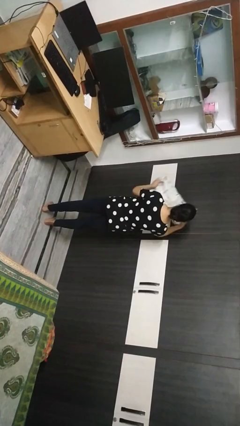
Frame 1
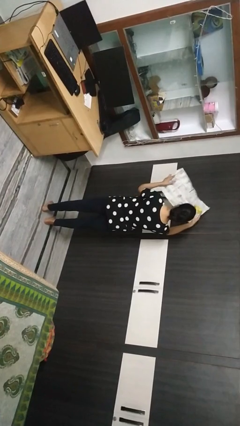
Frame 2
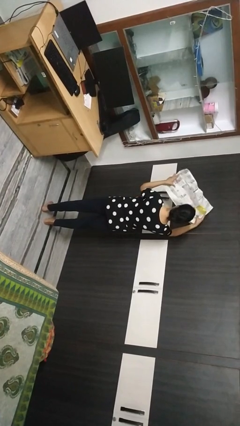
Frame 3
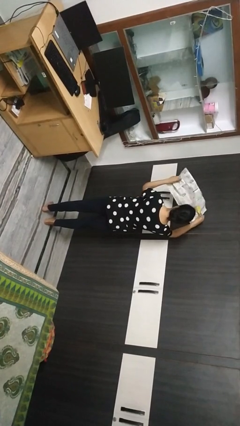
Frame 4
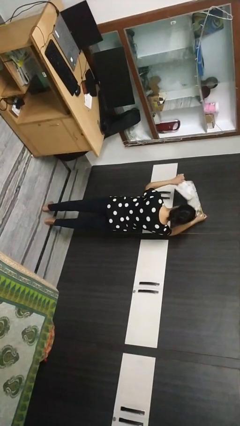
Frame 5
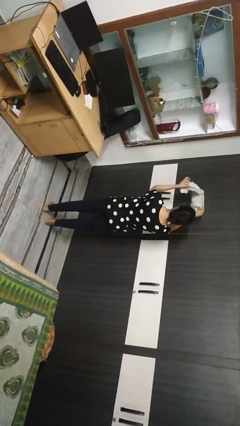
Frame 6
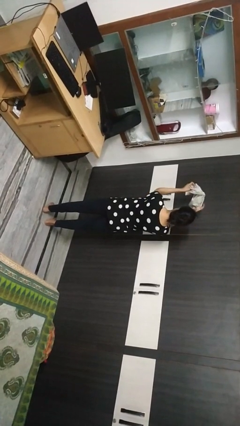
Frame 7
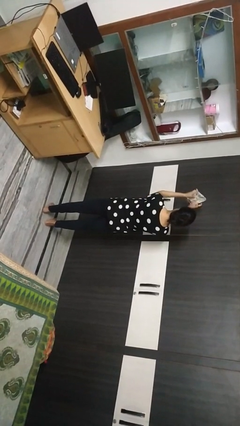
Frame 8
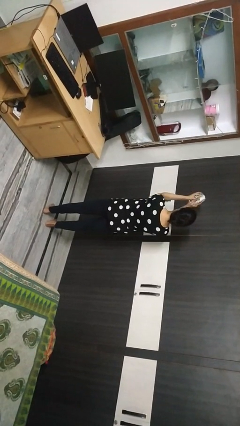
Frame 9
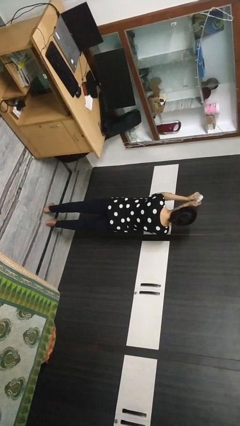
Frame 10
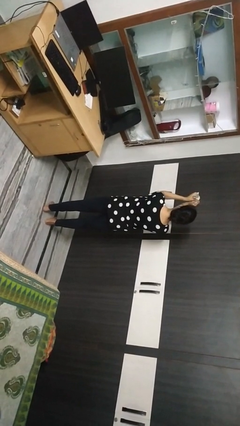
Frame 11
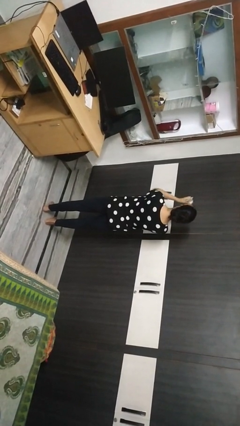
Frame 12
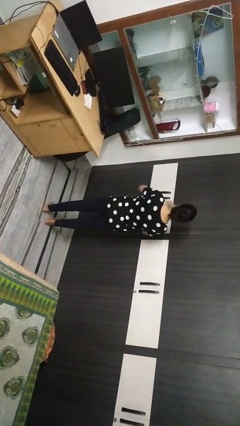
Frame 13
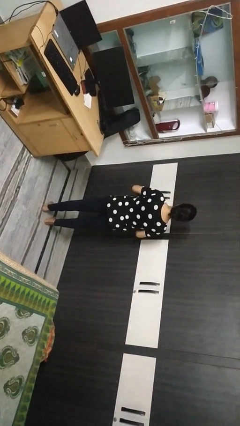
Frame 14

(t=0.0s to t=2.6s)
person crumples paper

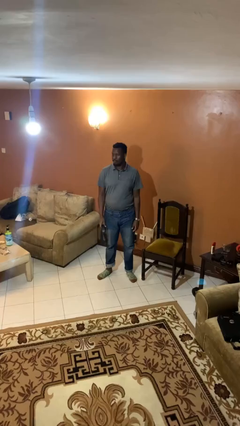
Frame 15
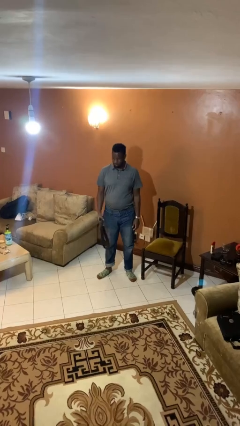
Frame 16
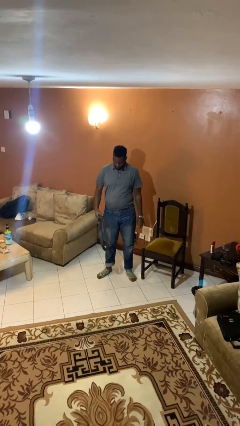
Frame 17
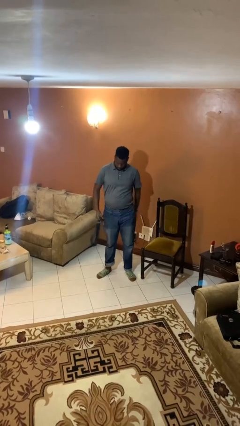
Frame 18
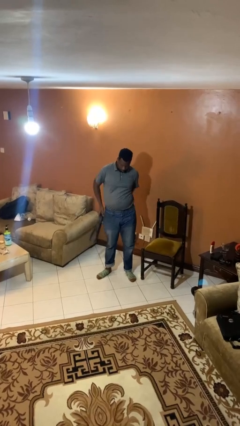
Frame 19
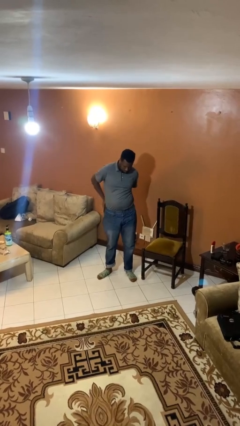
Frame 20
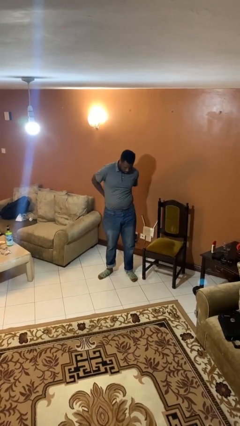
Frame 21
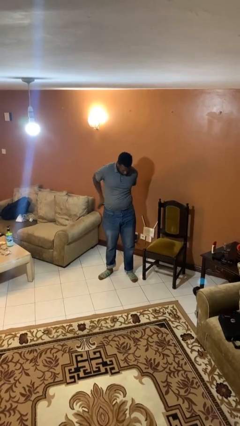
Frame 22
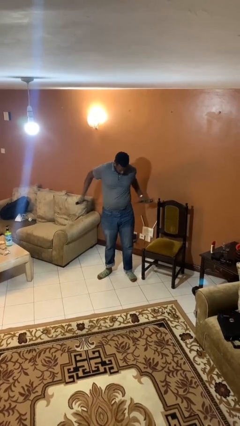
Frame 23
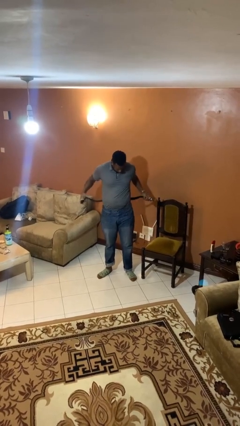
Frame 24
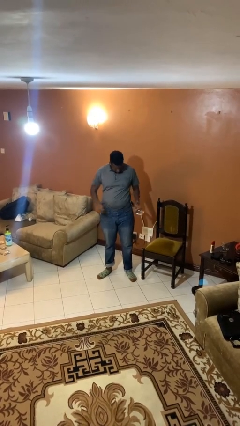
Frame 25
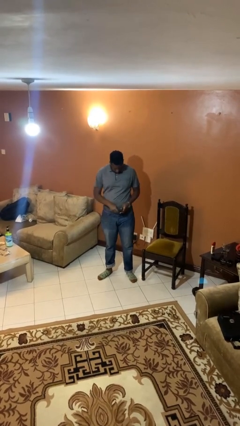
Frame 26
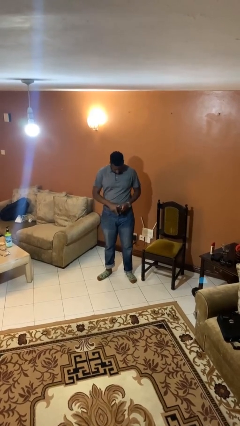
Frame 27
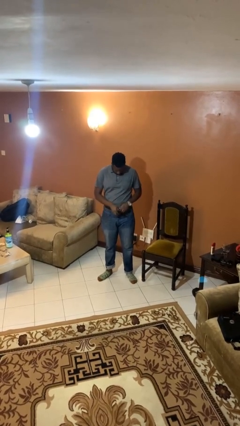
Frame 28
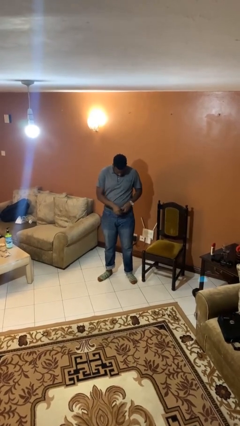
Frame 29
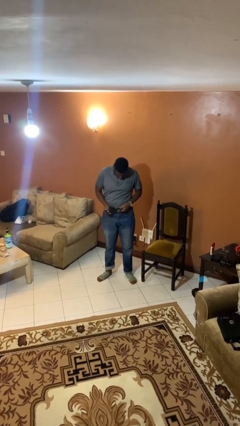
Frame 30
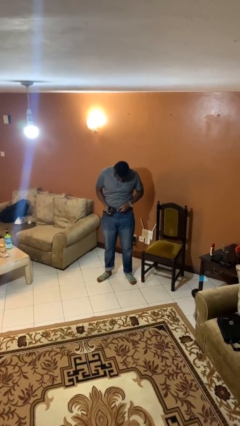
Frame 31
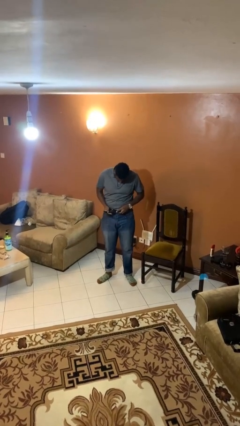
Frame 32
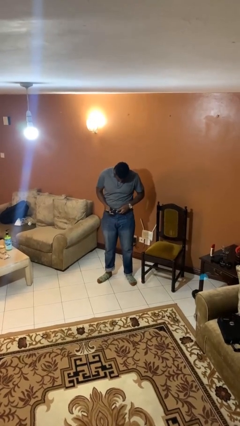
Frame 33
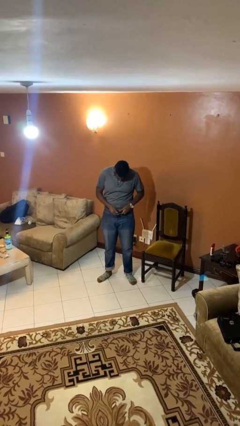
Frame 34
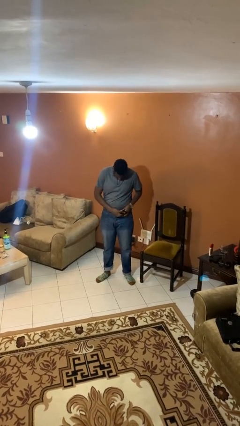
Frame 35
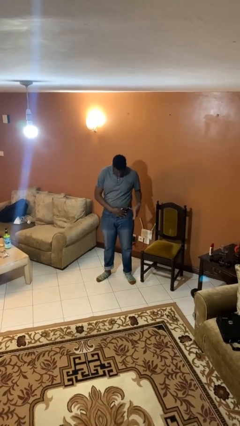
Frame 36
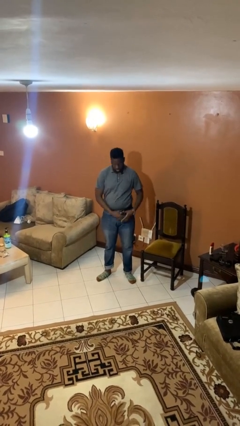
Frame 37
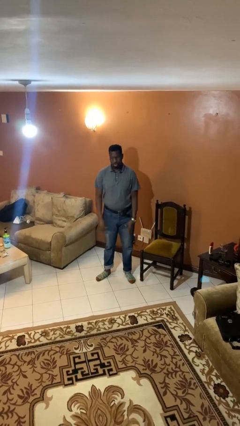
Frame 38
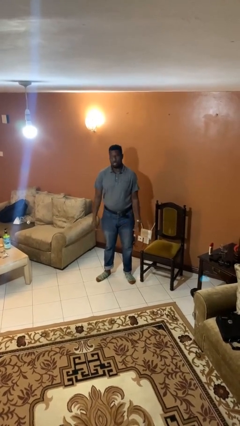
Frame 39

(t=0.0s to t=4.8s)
person puts on belt

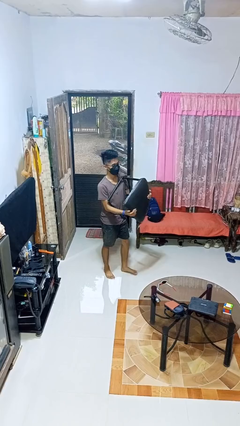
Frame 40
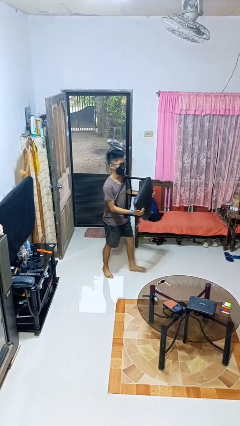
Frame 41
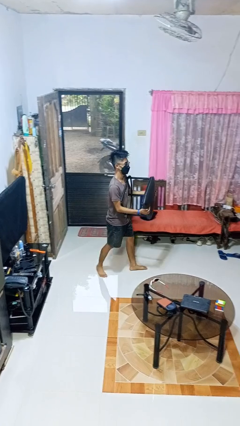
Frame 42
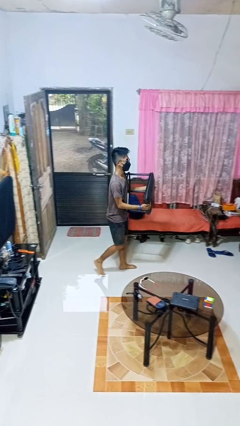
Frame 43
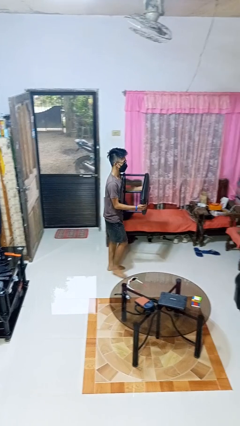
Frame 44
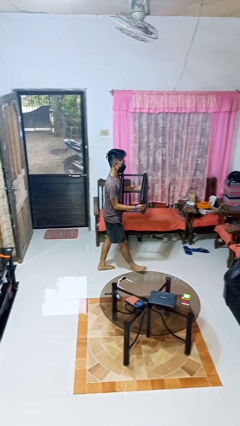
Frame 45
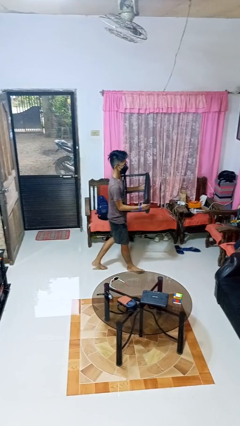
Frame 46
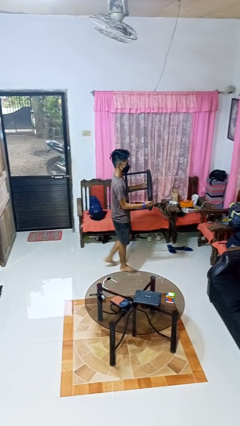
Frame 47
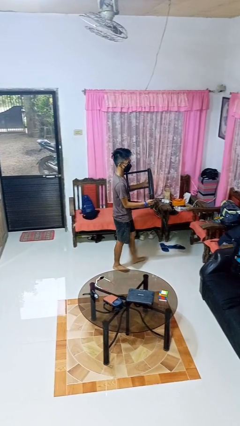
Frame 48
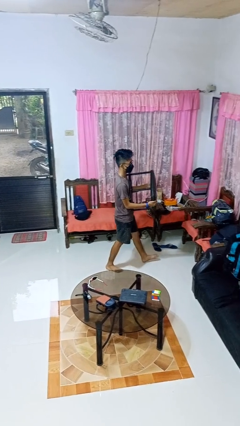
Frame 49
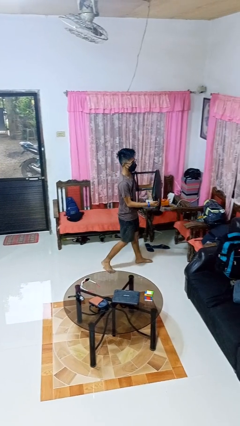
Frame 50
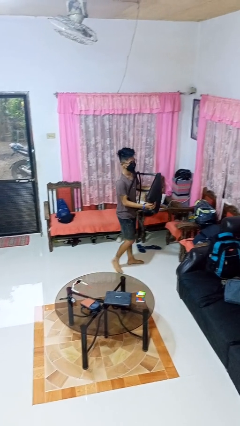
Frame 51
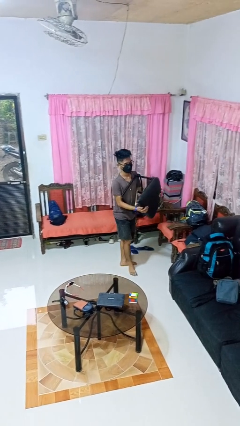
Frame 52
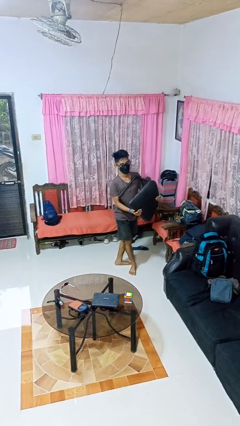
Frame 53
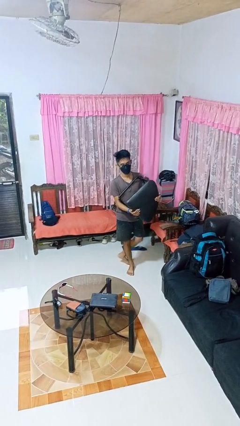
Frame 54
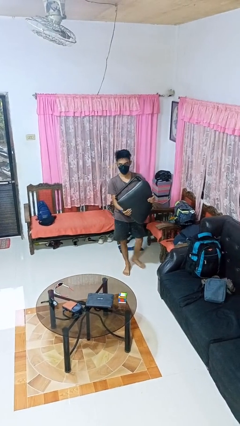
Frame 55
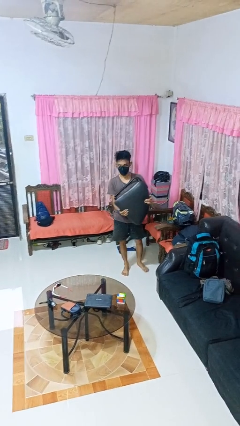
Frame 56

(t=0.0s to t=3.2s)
person carries furniture

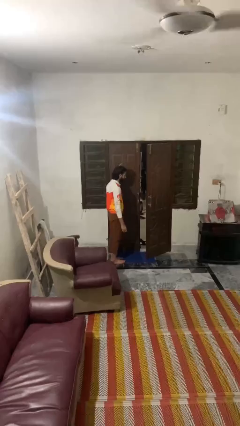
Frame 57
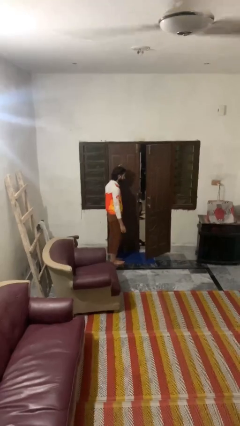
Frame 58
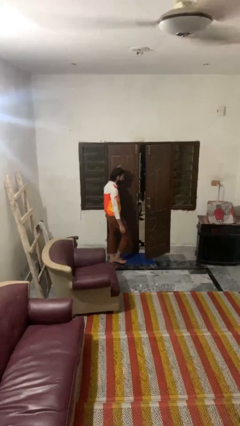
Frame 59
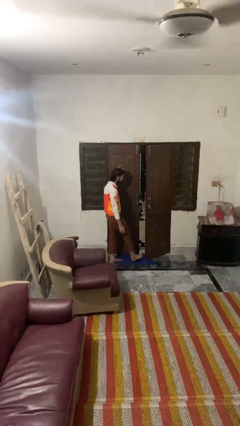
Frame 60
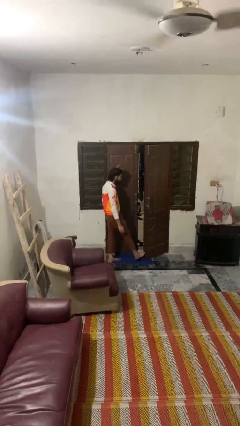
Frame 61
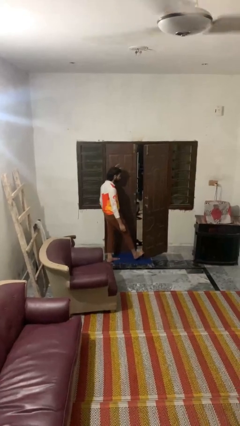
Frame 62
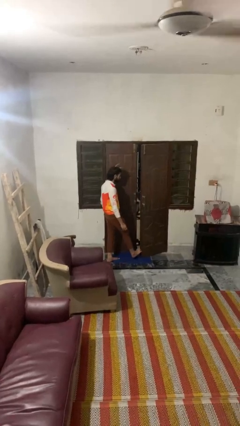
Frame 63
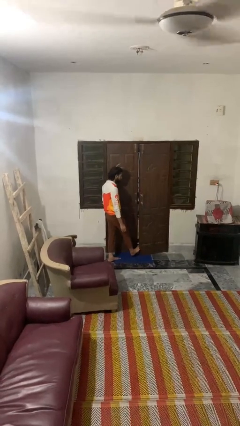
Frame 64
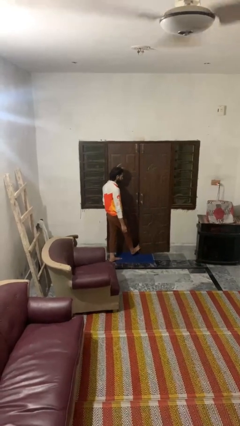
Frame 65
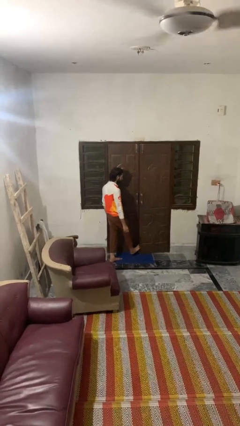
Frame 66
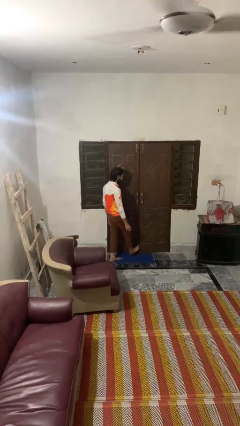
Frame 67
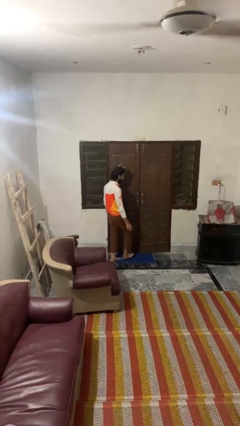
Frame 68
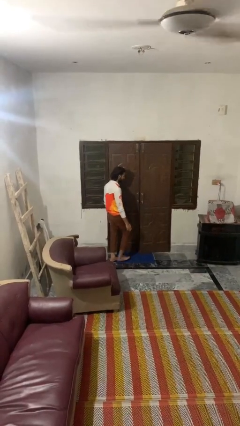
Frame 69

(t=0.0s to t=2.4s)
person closes door with foot

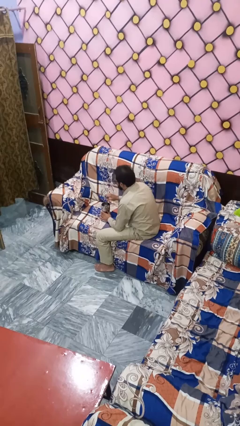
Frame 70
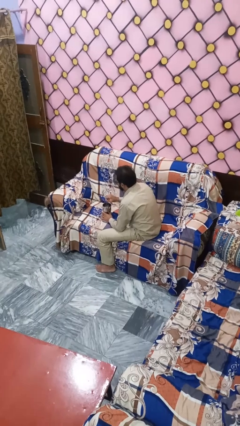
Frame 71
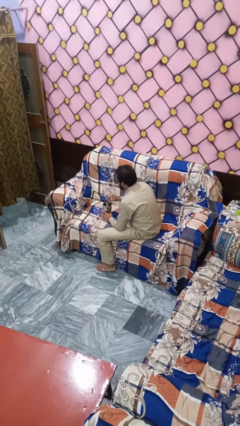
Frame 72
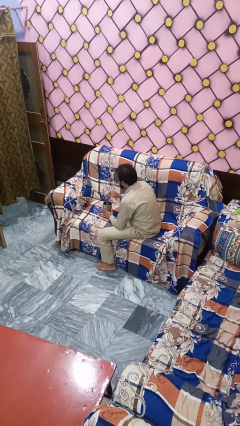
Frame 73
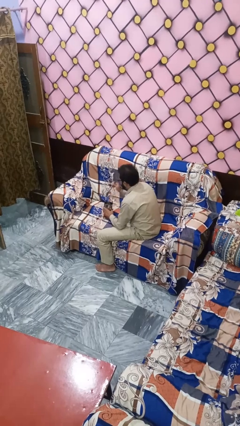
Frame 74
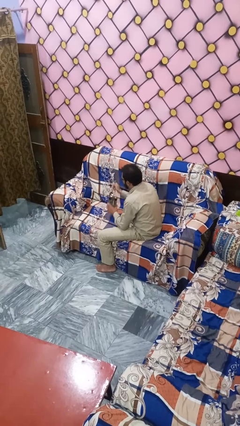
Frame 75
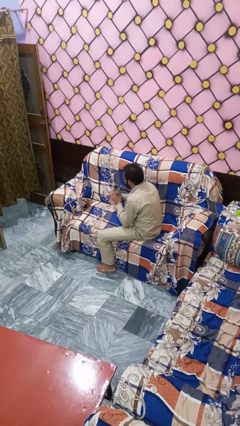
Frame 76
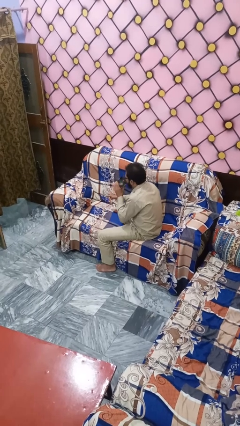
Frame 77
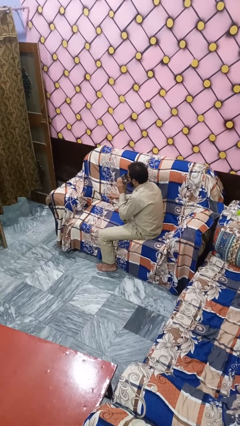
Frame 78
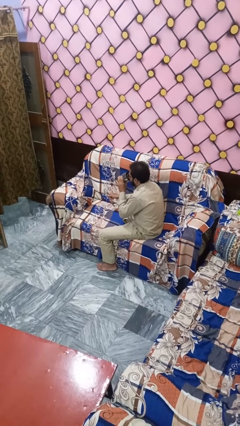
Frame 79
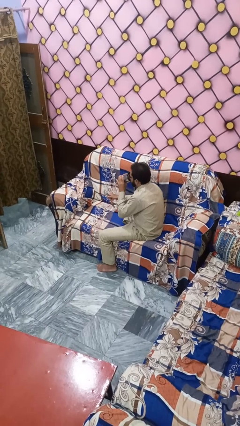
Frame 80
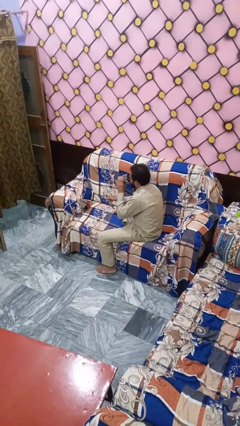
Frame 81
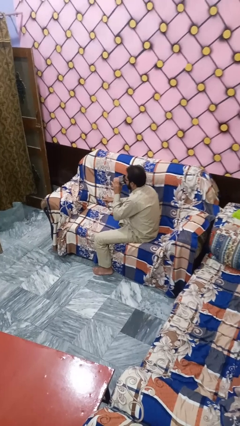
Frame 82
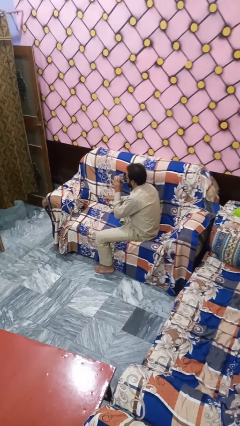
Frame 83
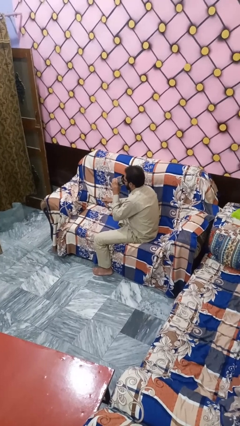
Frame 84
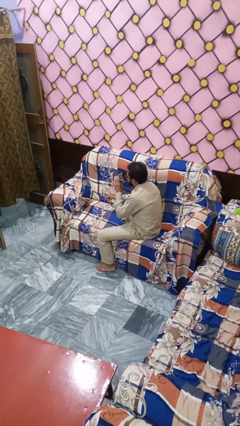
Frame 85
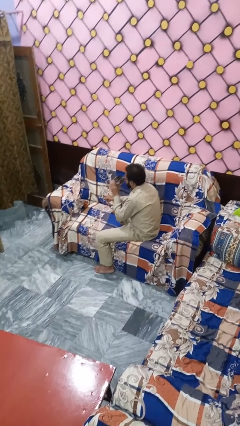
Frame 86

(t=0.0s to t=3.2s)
person drinks from mug

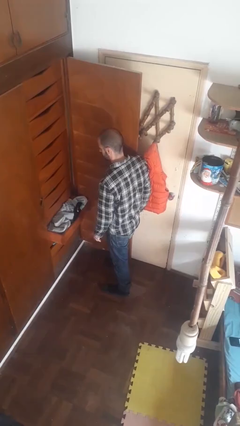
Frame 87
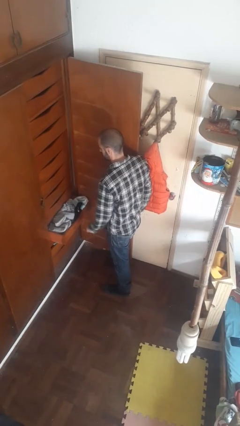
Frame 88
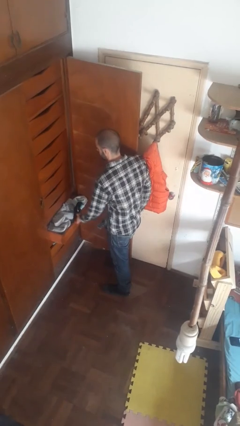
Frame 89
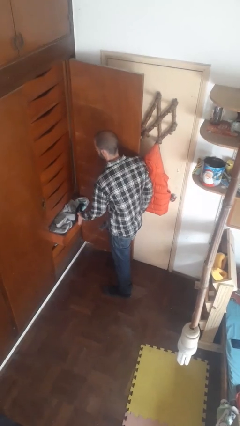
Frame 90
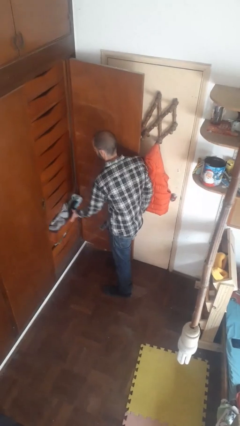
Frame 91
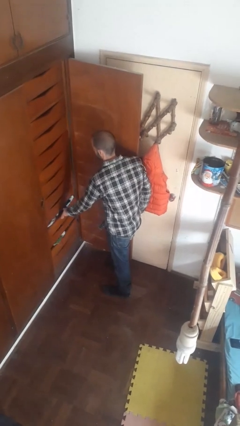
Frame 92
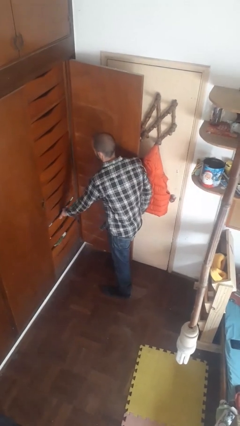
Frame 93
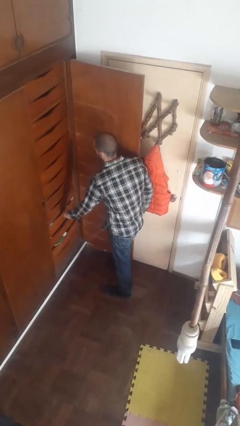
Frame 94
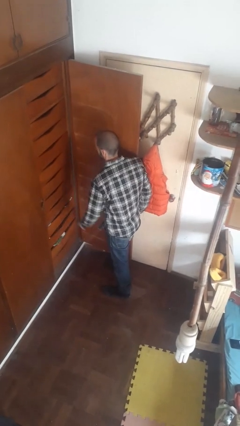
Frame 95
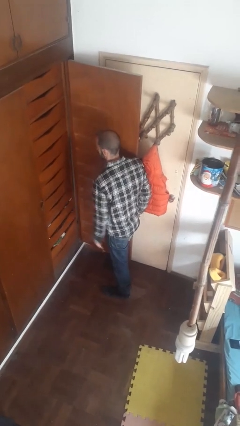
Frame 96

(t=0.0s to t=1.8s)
person closes dresser drawer
